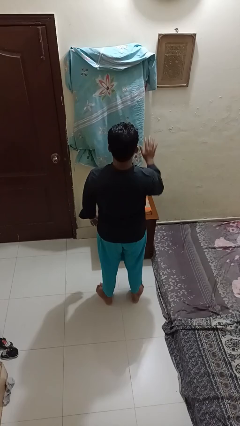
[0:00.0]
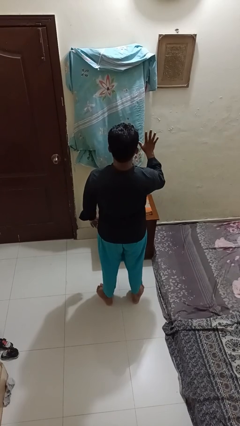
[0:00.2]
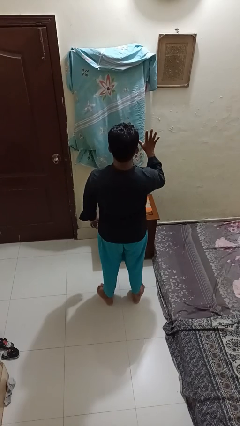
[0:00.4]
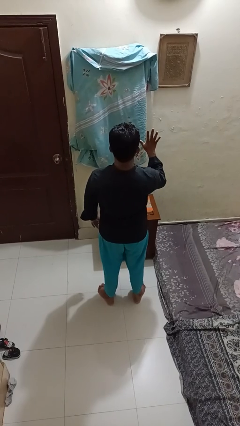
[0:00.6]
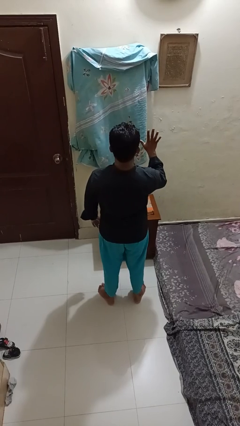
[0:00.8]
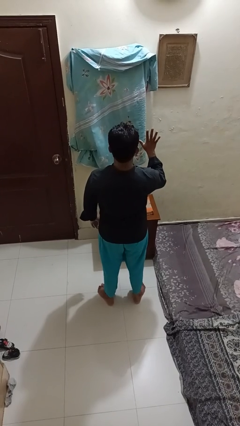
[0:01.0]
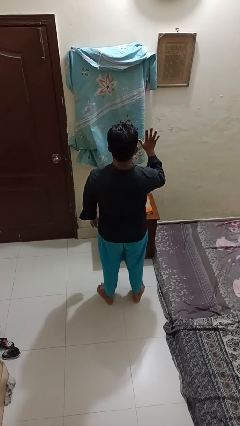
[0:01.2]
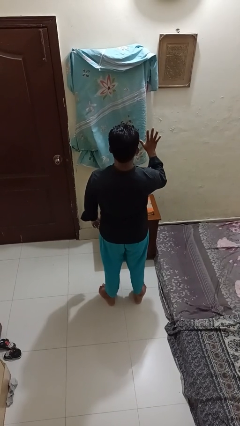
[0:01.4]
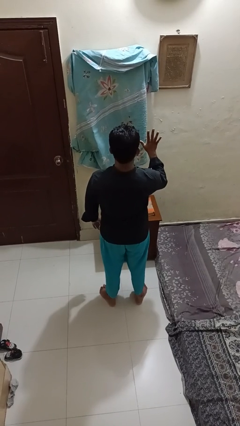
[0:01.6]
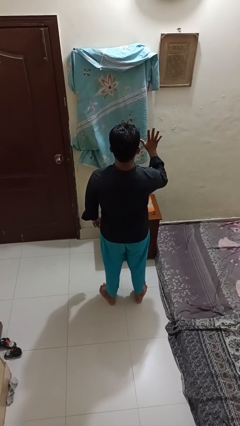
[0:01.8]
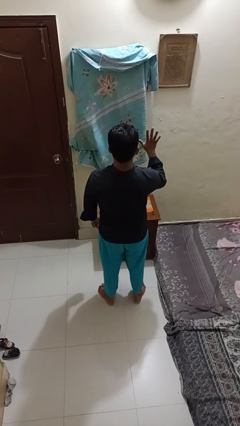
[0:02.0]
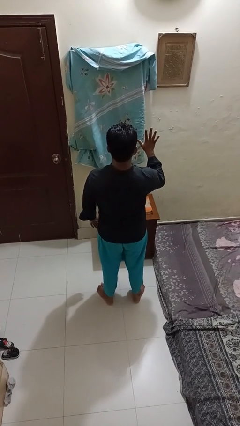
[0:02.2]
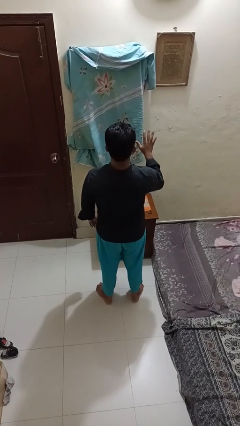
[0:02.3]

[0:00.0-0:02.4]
person gestures number five

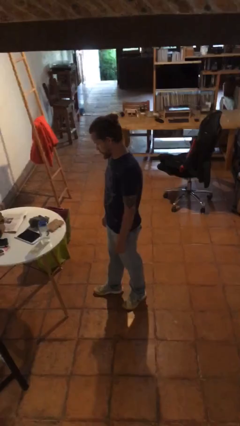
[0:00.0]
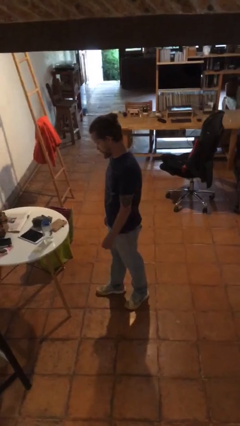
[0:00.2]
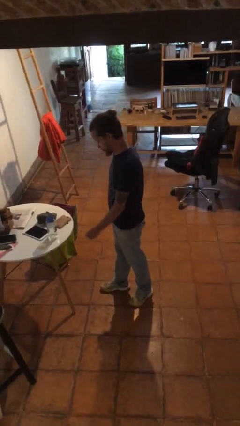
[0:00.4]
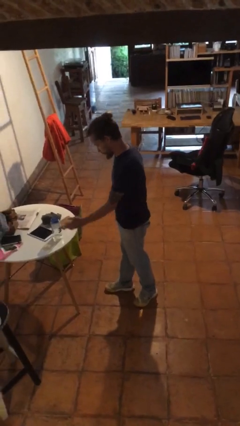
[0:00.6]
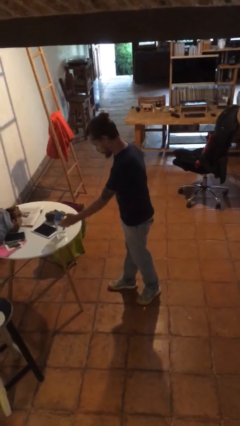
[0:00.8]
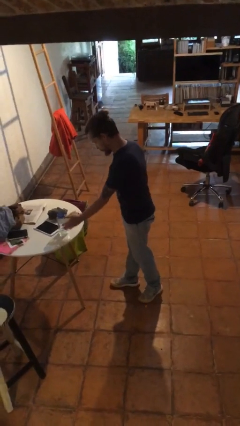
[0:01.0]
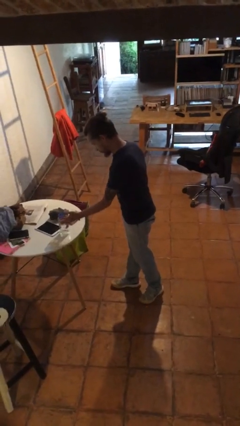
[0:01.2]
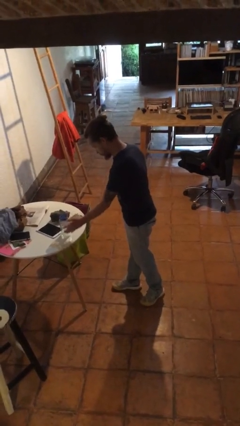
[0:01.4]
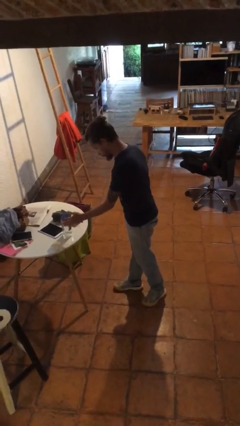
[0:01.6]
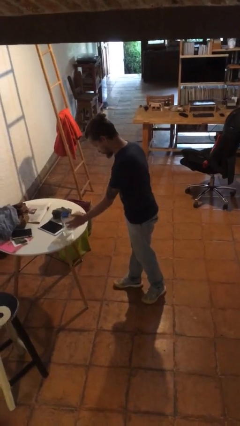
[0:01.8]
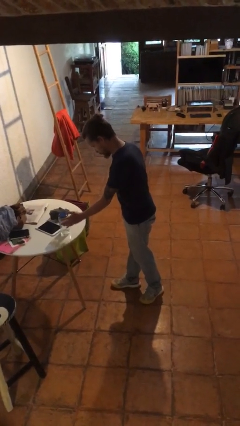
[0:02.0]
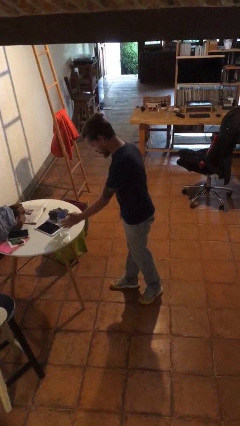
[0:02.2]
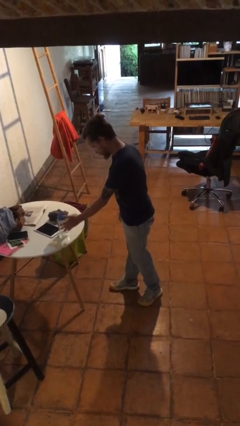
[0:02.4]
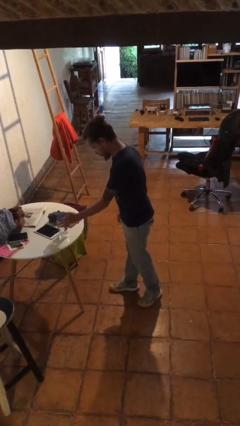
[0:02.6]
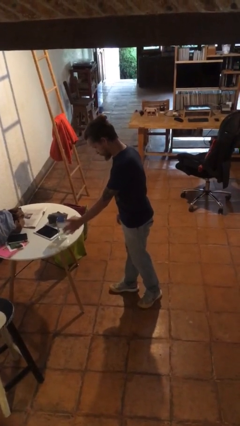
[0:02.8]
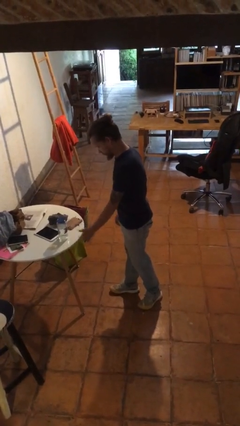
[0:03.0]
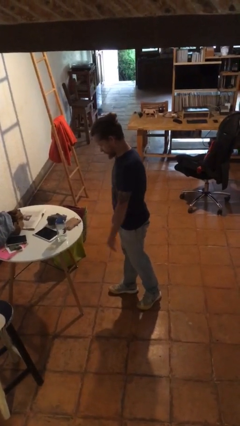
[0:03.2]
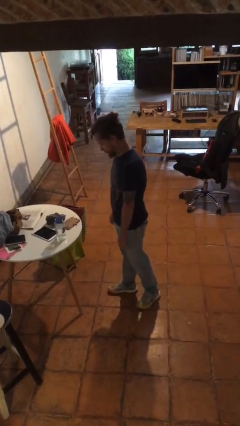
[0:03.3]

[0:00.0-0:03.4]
person waves hand over object

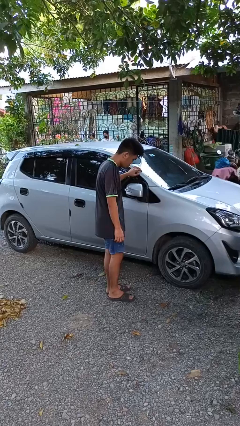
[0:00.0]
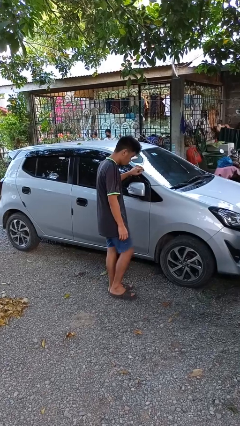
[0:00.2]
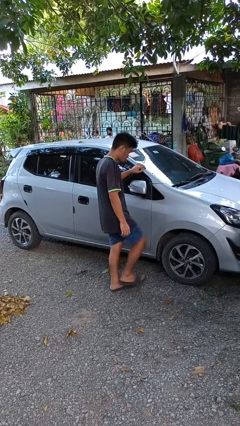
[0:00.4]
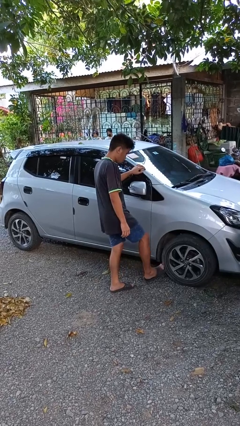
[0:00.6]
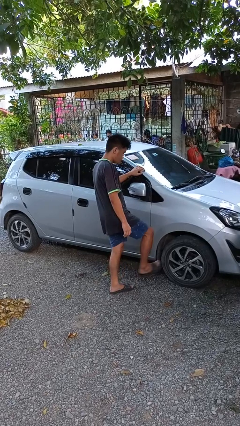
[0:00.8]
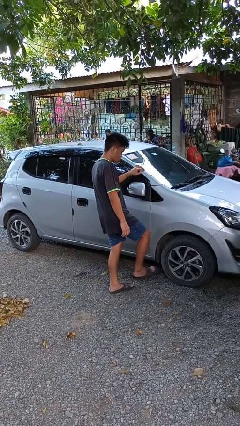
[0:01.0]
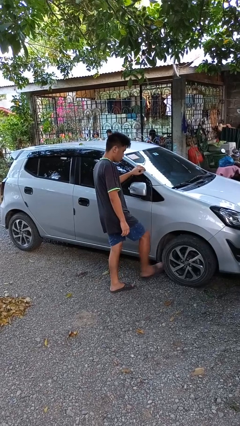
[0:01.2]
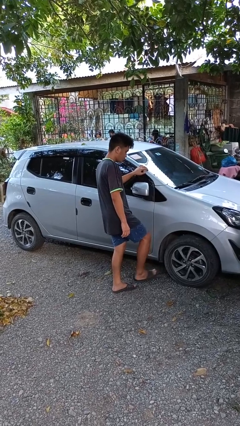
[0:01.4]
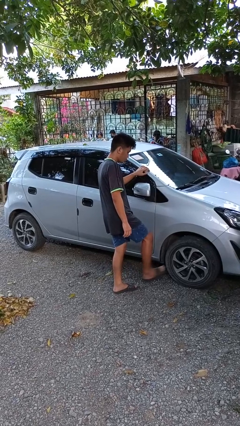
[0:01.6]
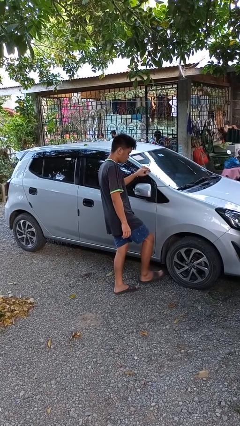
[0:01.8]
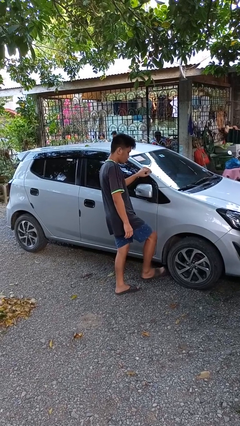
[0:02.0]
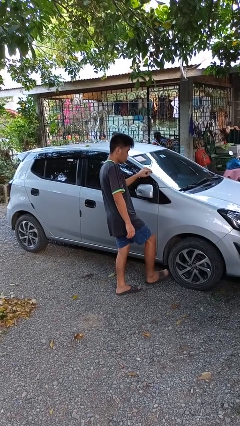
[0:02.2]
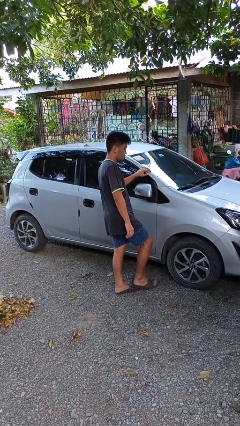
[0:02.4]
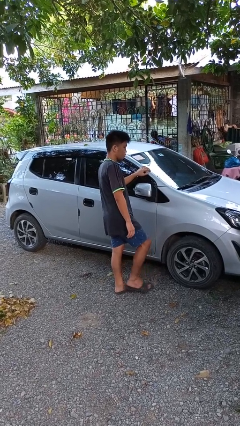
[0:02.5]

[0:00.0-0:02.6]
person kicks car tires

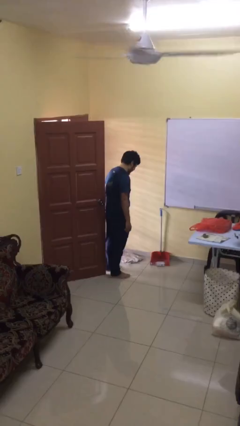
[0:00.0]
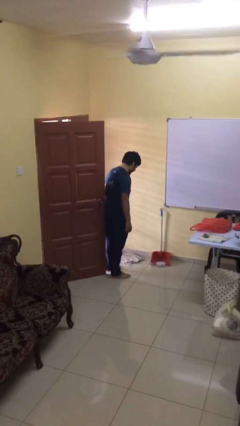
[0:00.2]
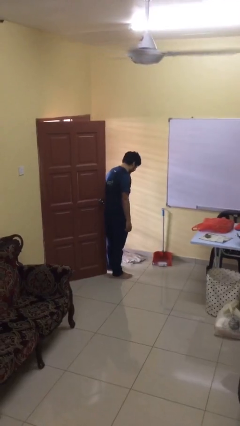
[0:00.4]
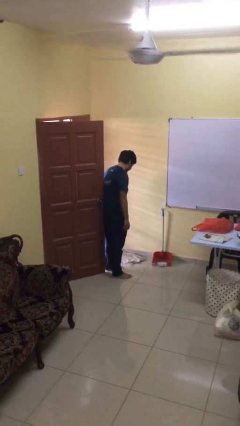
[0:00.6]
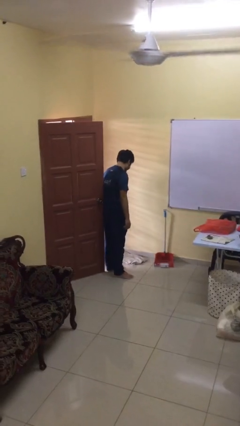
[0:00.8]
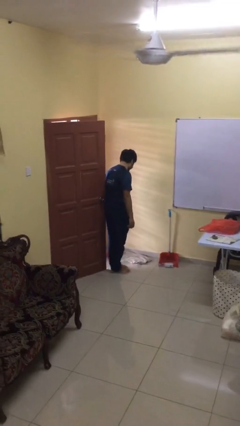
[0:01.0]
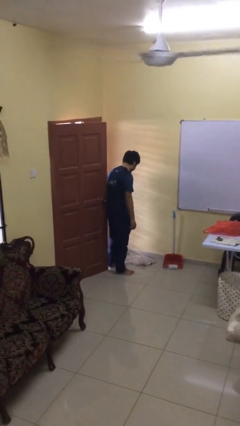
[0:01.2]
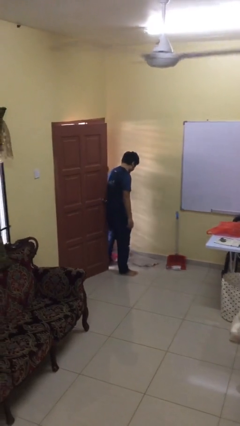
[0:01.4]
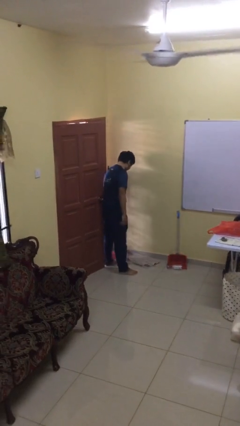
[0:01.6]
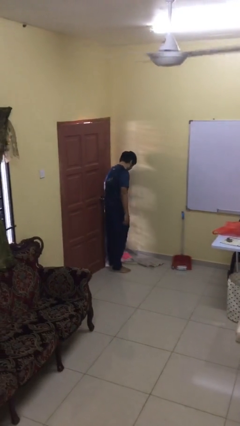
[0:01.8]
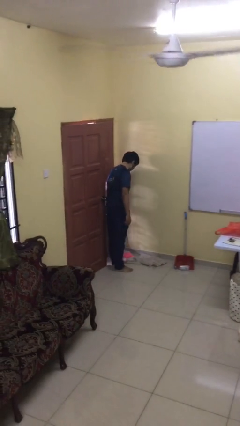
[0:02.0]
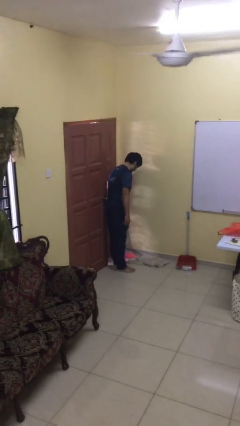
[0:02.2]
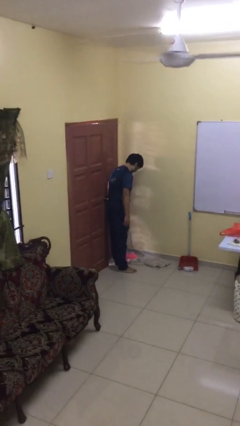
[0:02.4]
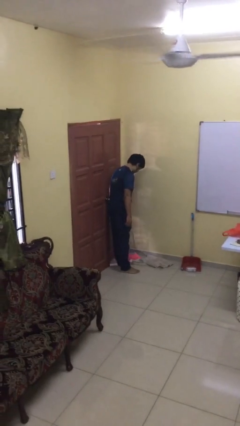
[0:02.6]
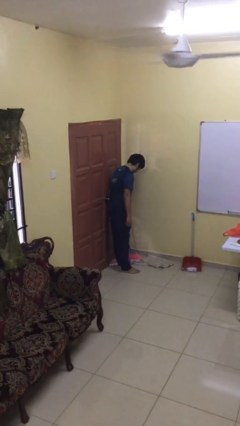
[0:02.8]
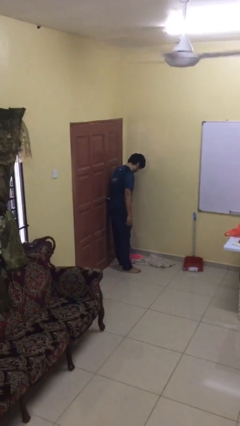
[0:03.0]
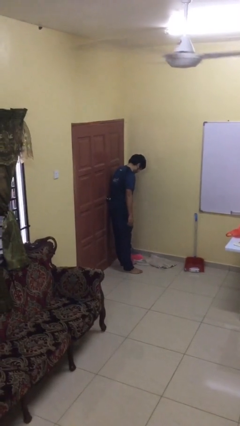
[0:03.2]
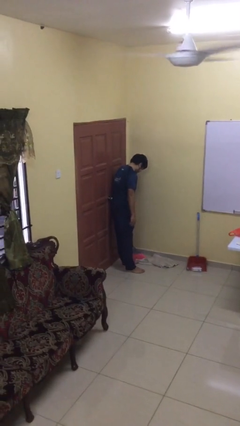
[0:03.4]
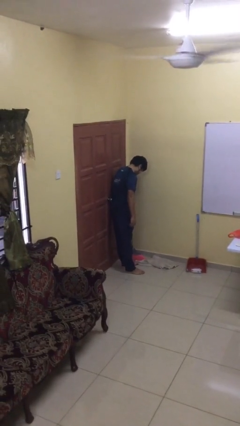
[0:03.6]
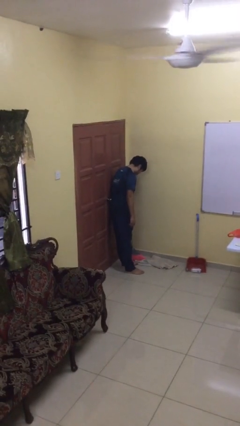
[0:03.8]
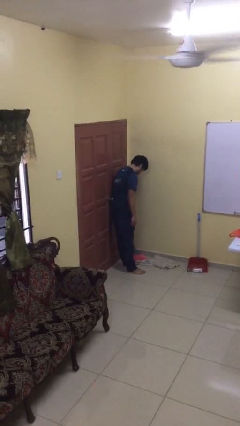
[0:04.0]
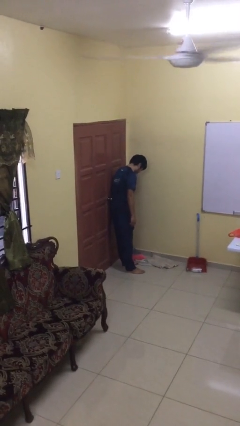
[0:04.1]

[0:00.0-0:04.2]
person closes door with hip

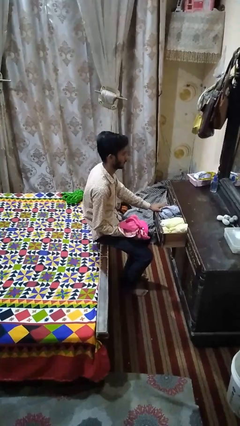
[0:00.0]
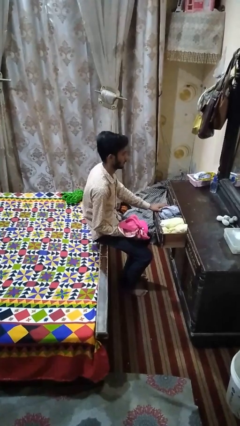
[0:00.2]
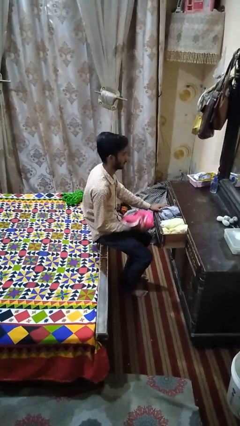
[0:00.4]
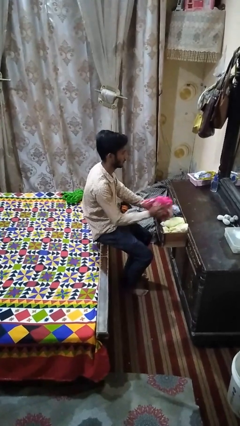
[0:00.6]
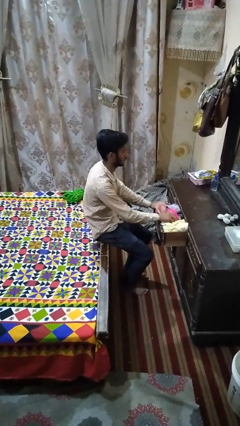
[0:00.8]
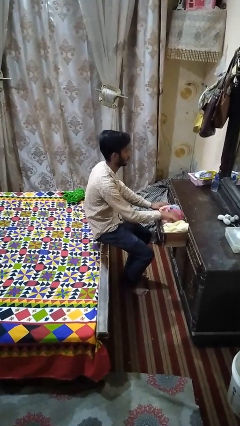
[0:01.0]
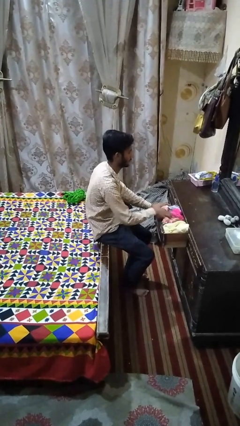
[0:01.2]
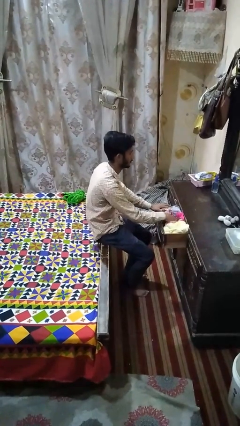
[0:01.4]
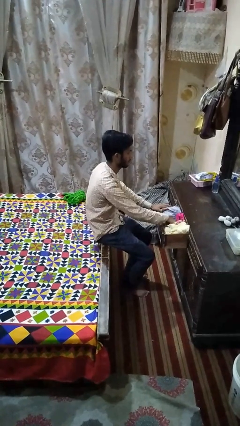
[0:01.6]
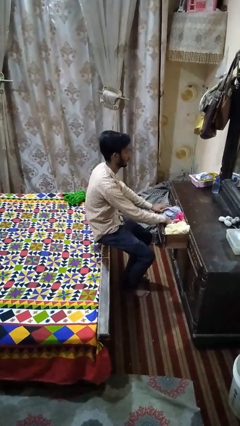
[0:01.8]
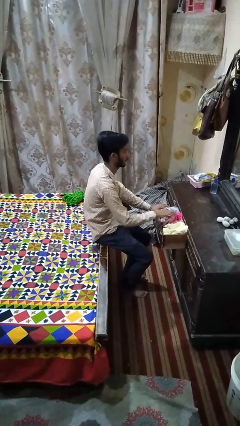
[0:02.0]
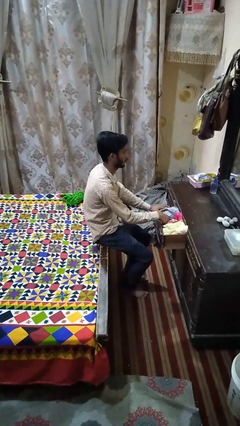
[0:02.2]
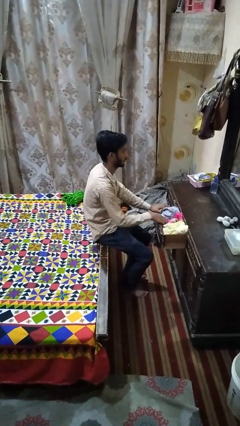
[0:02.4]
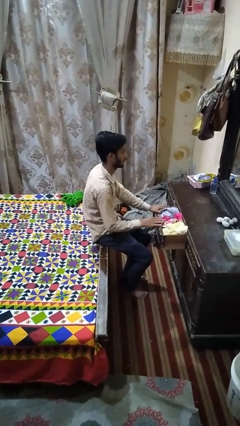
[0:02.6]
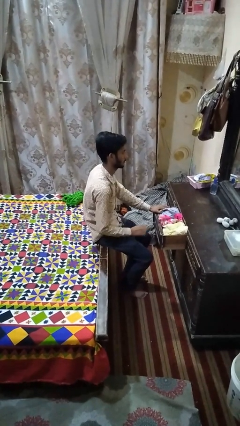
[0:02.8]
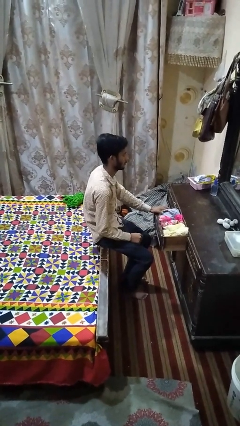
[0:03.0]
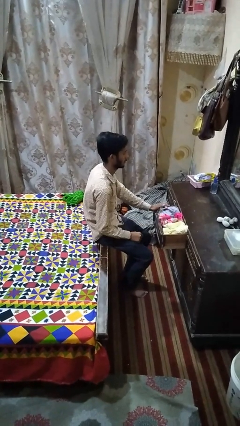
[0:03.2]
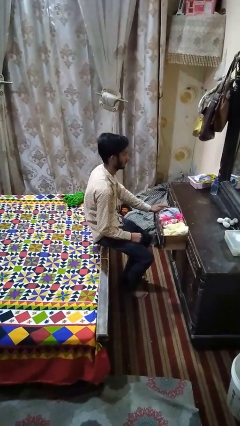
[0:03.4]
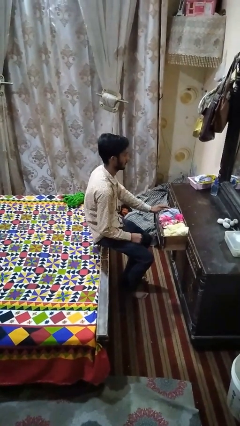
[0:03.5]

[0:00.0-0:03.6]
person puts clothes into dresser

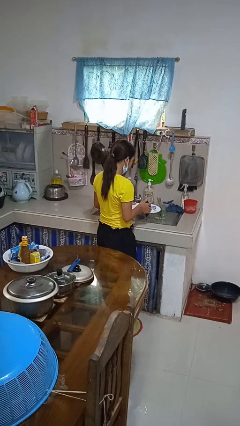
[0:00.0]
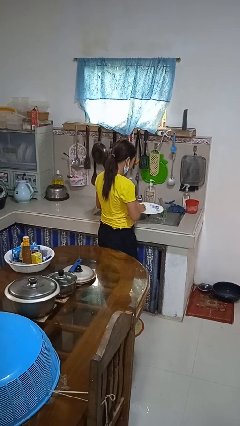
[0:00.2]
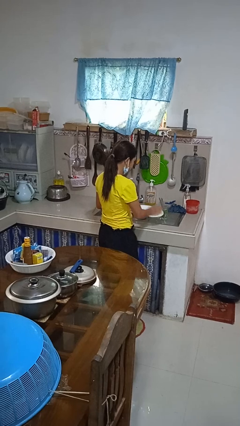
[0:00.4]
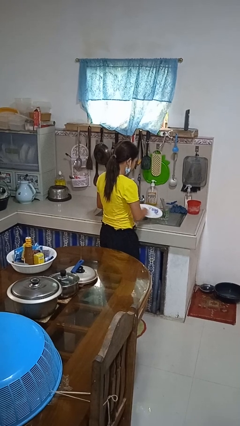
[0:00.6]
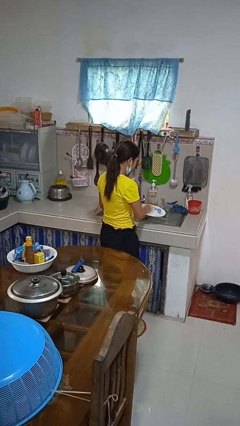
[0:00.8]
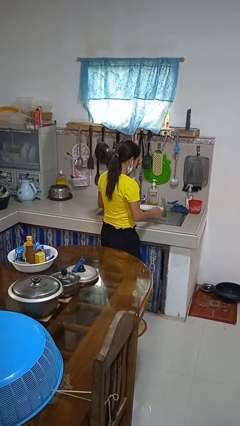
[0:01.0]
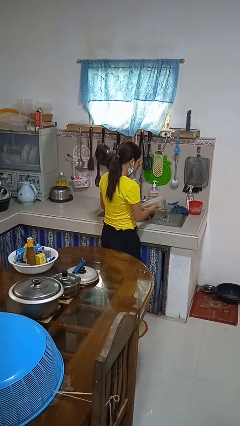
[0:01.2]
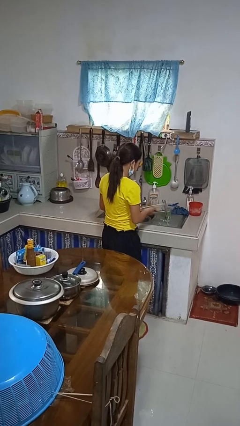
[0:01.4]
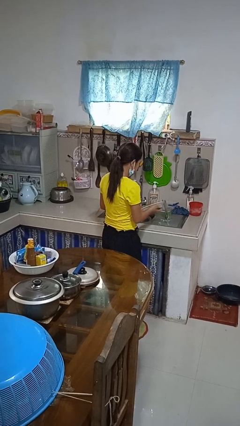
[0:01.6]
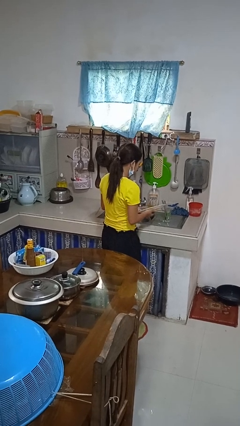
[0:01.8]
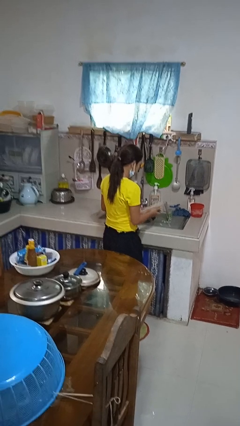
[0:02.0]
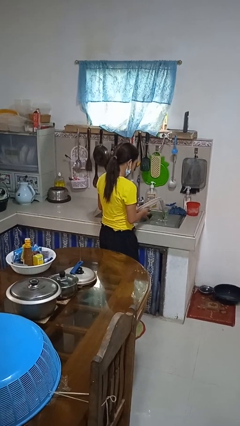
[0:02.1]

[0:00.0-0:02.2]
person washes dish
